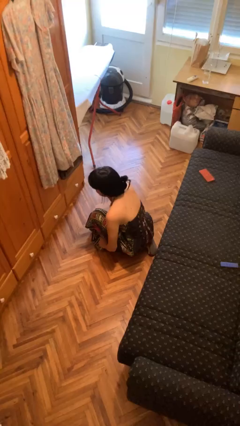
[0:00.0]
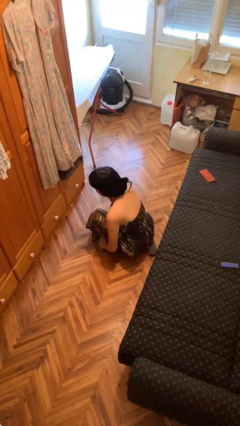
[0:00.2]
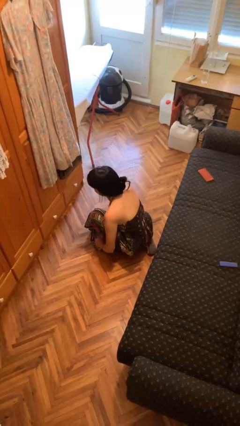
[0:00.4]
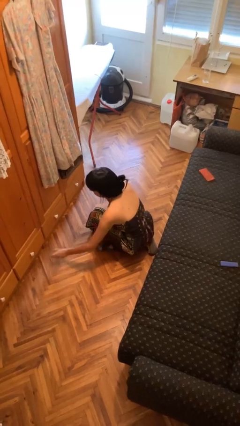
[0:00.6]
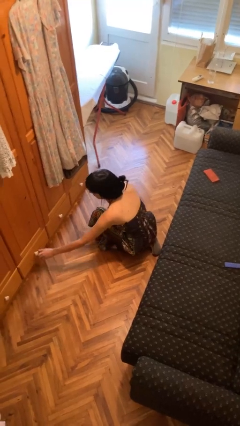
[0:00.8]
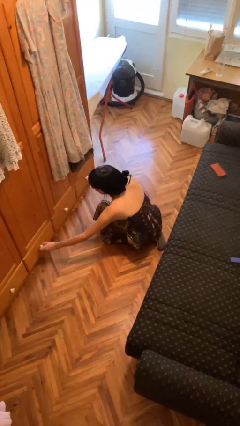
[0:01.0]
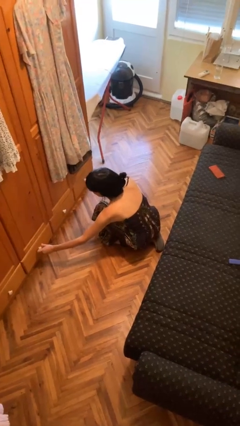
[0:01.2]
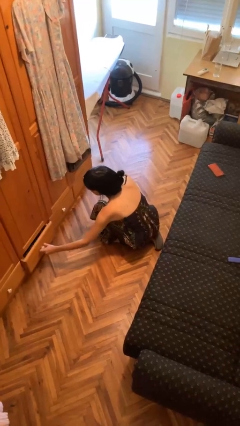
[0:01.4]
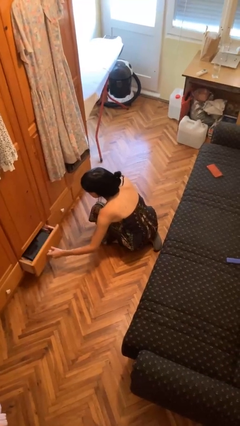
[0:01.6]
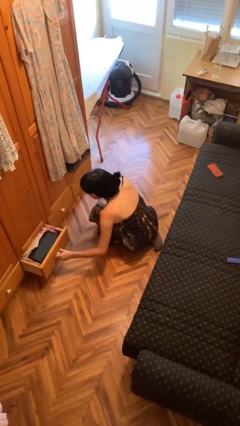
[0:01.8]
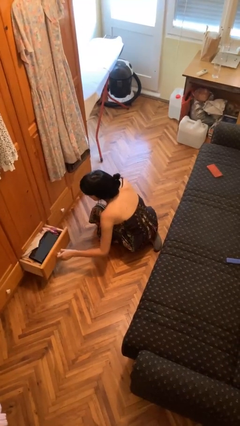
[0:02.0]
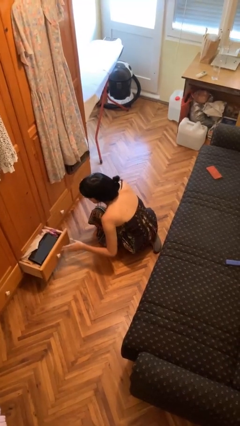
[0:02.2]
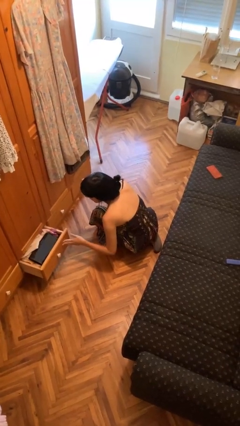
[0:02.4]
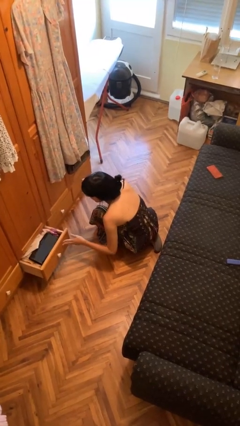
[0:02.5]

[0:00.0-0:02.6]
person opens dresser drawer

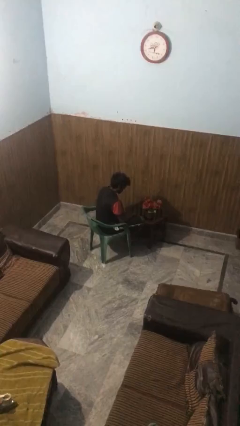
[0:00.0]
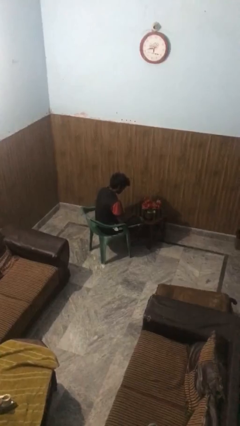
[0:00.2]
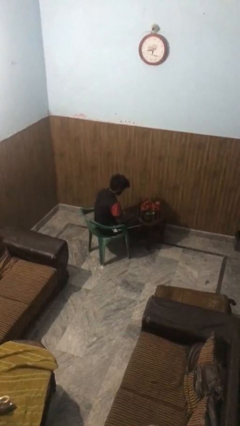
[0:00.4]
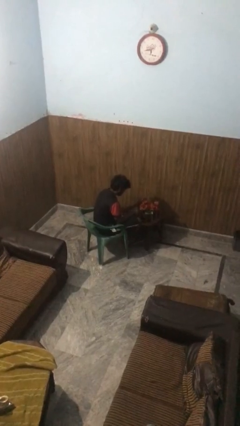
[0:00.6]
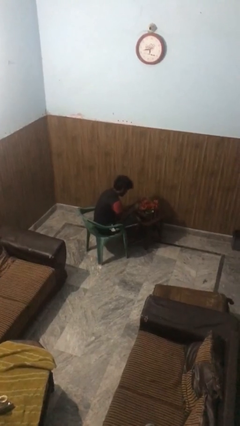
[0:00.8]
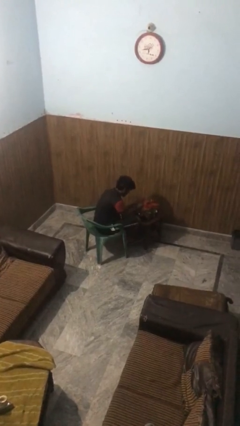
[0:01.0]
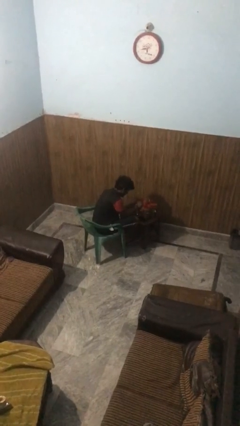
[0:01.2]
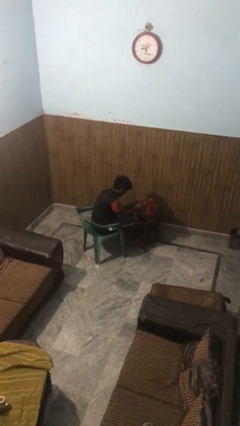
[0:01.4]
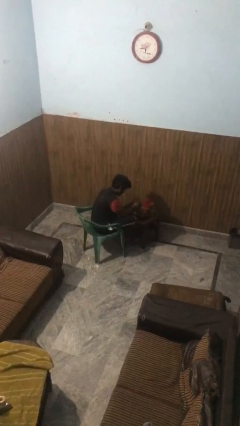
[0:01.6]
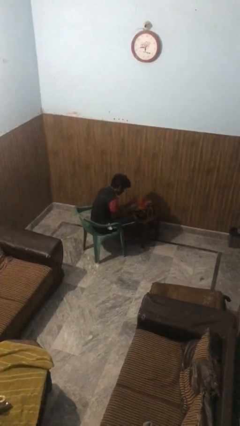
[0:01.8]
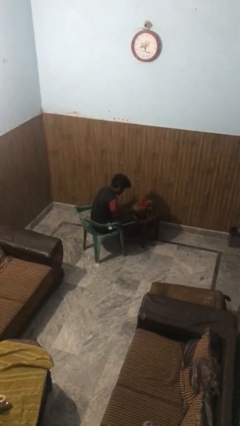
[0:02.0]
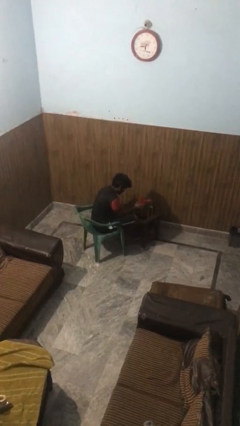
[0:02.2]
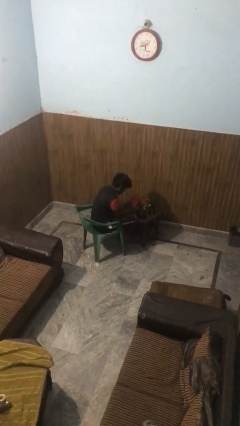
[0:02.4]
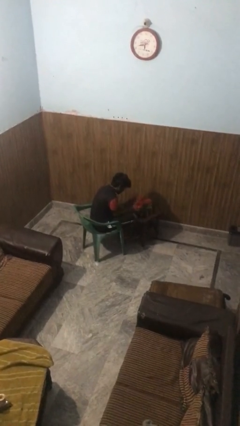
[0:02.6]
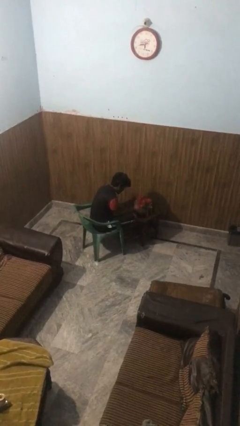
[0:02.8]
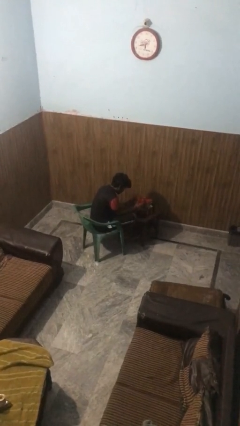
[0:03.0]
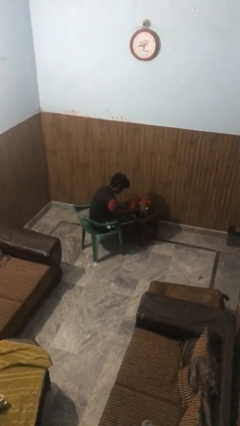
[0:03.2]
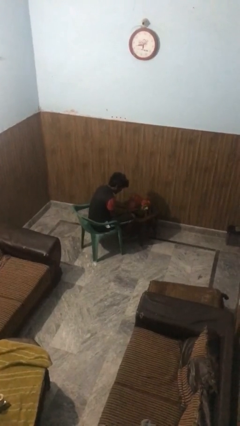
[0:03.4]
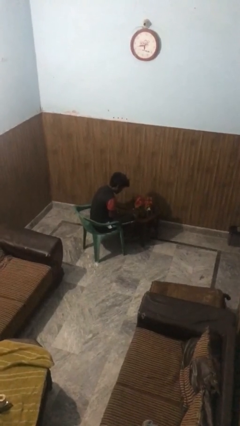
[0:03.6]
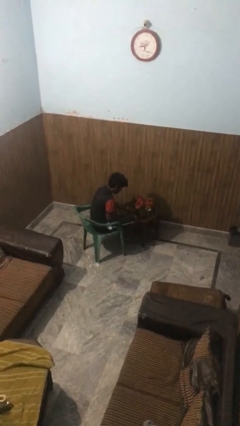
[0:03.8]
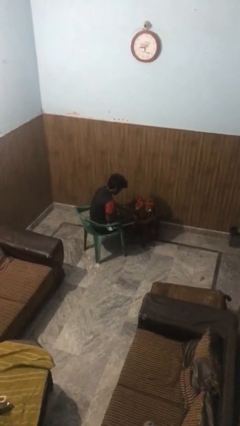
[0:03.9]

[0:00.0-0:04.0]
person arranges flowers in vase

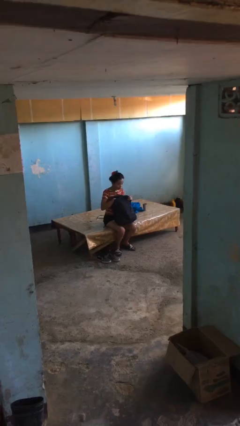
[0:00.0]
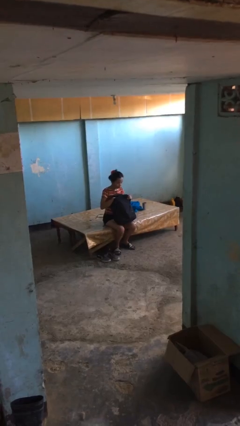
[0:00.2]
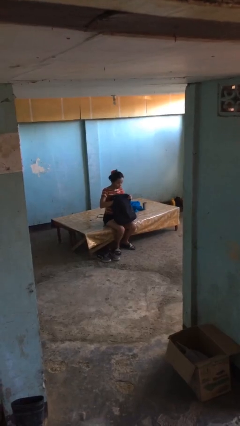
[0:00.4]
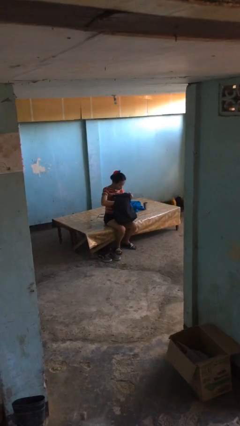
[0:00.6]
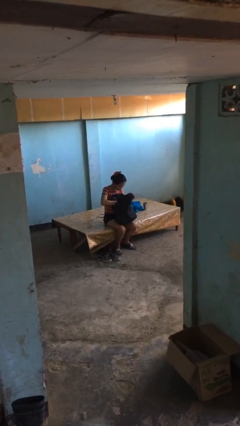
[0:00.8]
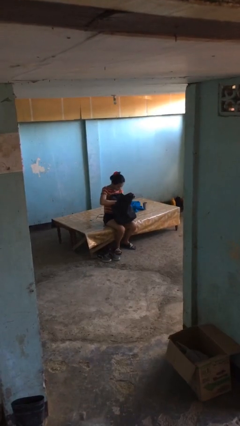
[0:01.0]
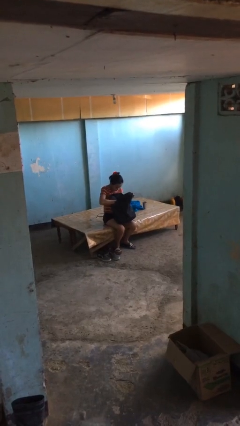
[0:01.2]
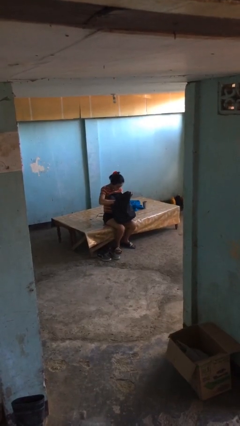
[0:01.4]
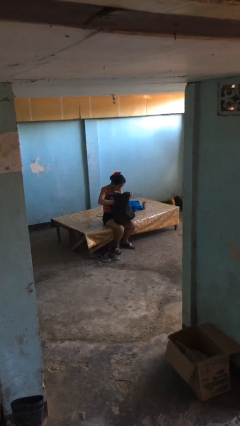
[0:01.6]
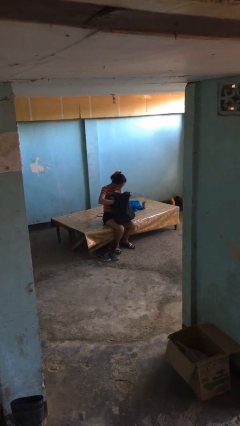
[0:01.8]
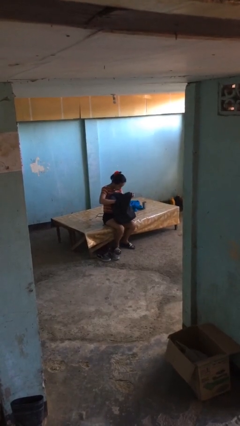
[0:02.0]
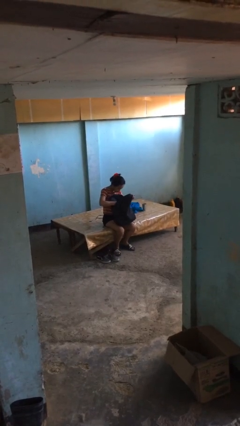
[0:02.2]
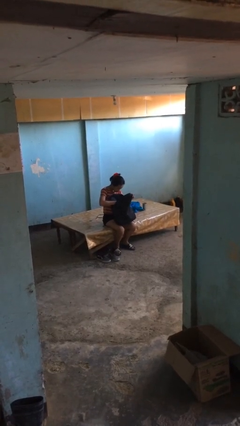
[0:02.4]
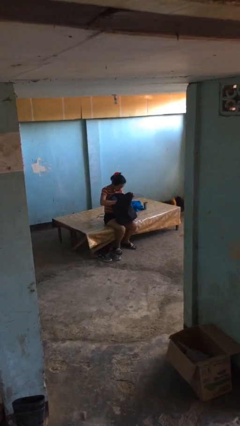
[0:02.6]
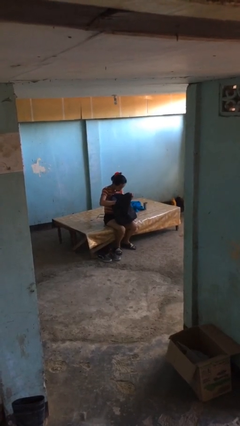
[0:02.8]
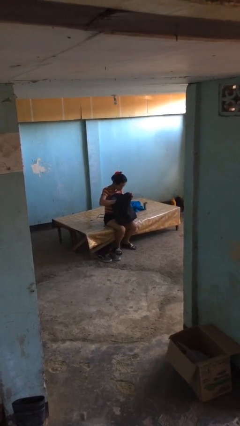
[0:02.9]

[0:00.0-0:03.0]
person searches in backpack

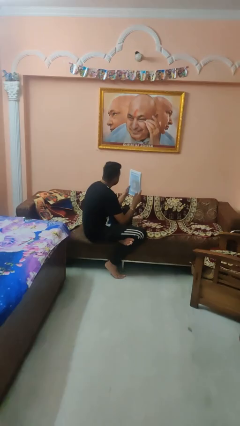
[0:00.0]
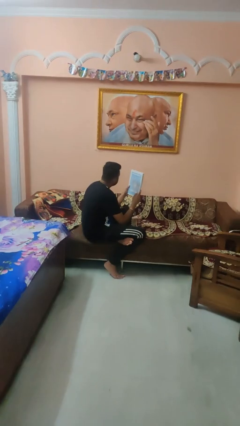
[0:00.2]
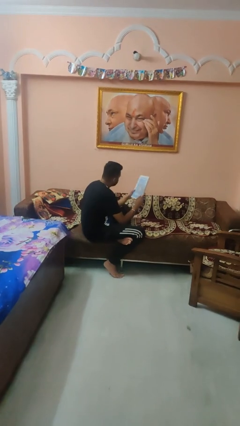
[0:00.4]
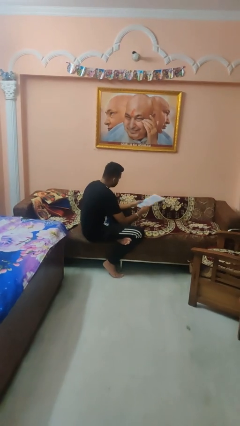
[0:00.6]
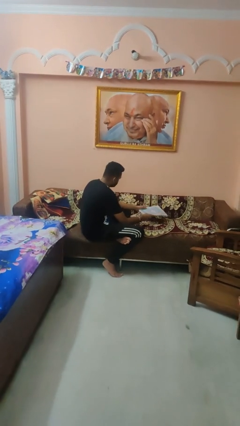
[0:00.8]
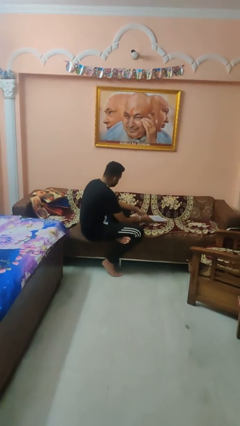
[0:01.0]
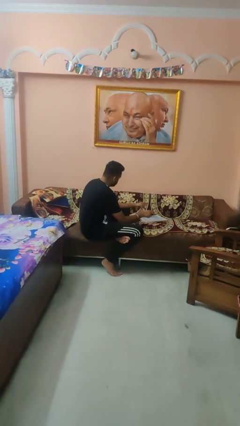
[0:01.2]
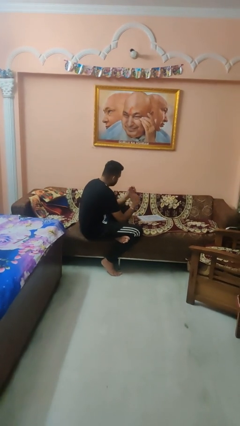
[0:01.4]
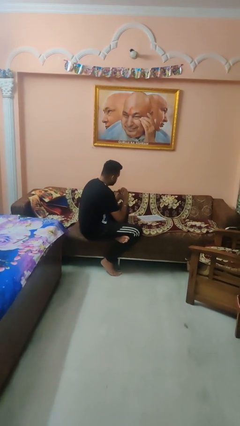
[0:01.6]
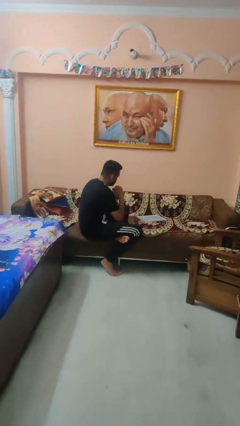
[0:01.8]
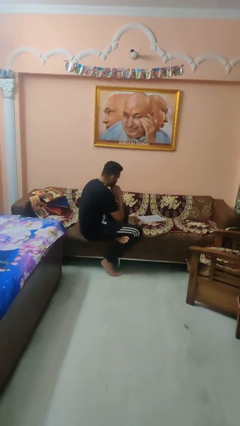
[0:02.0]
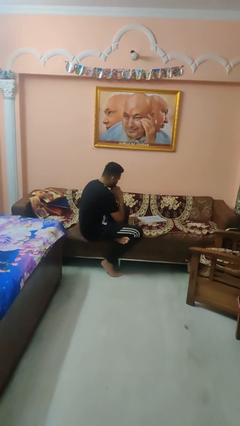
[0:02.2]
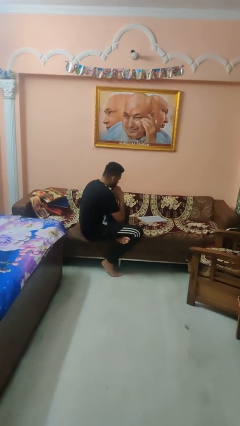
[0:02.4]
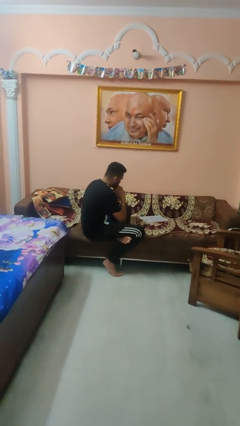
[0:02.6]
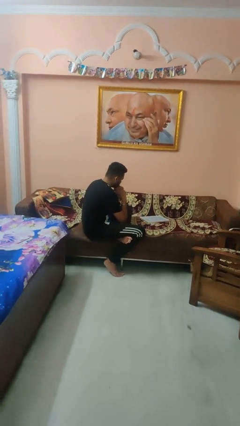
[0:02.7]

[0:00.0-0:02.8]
person puts down object on couch

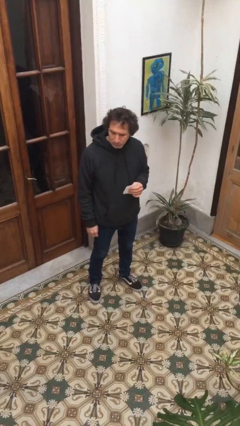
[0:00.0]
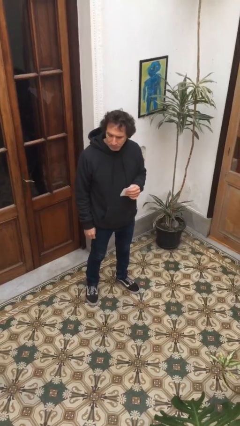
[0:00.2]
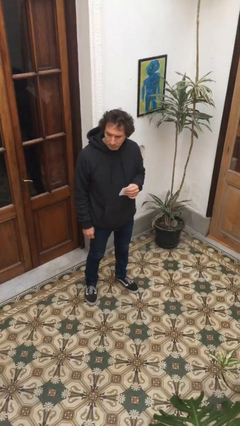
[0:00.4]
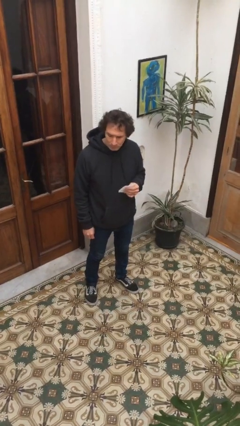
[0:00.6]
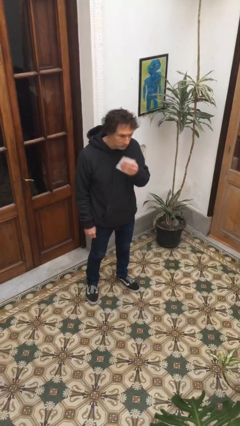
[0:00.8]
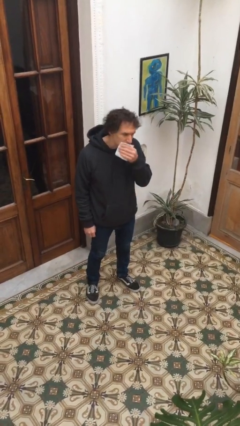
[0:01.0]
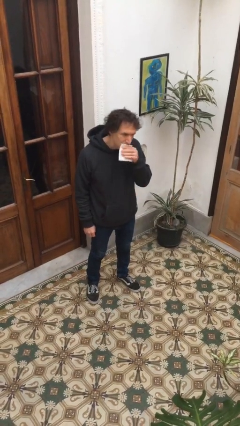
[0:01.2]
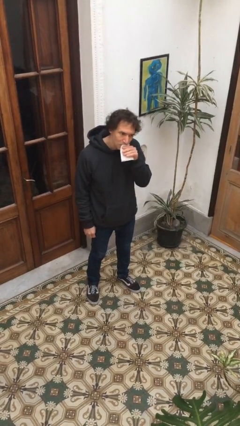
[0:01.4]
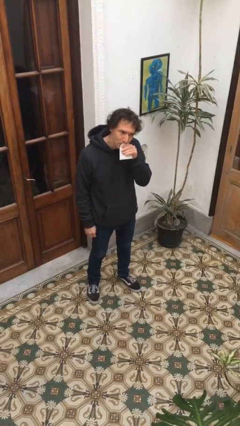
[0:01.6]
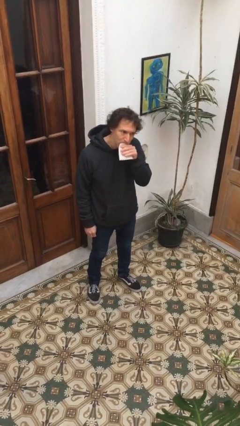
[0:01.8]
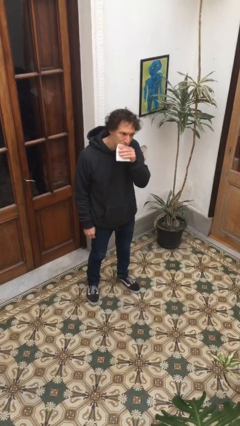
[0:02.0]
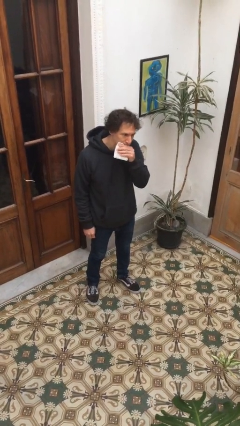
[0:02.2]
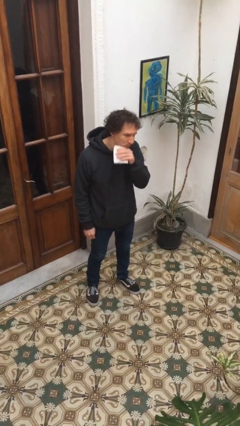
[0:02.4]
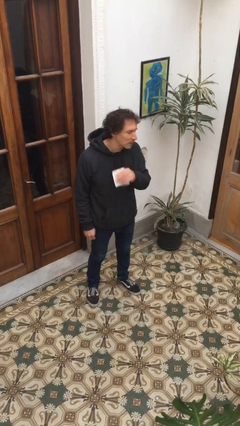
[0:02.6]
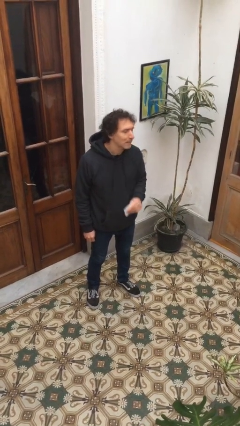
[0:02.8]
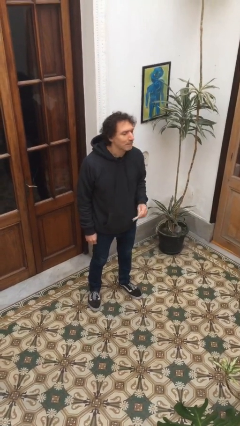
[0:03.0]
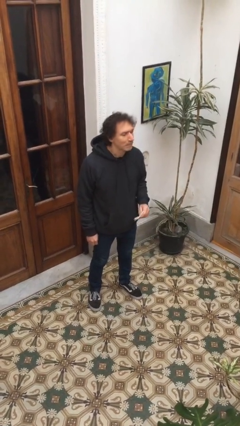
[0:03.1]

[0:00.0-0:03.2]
person wipes mouth with napkin

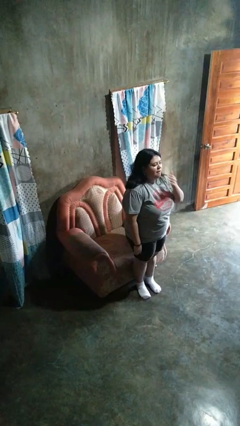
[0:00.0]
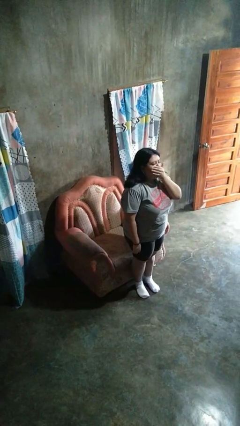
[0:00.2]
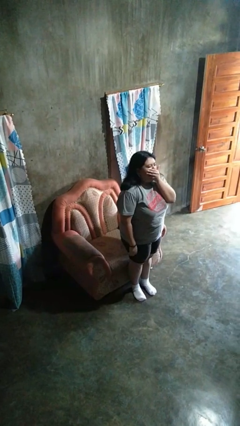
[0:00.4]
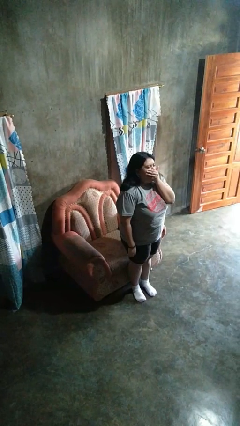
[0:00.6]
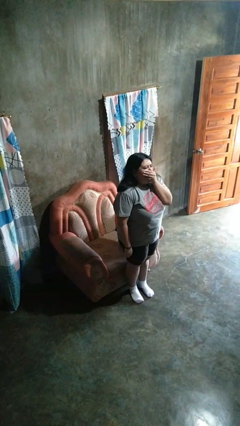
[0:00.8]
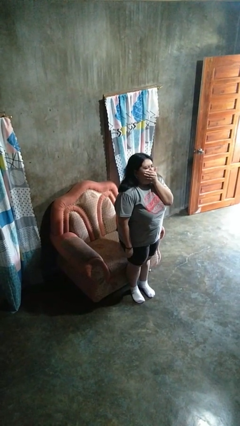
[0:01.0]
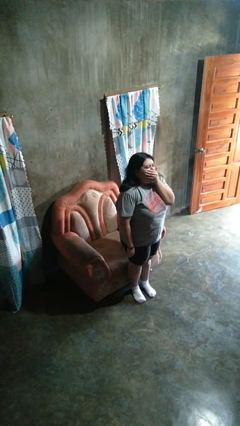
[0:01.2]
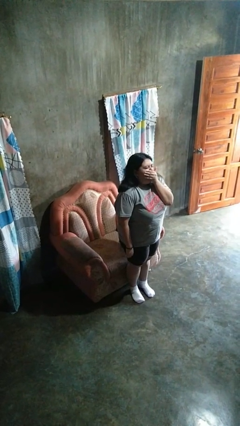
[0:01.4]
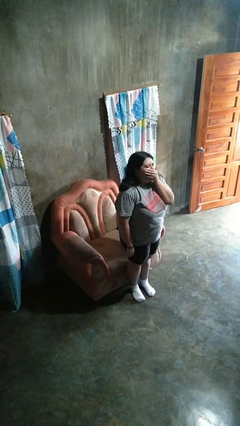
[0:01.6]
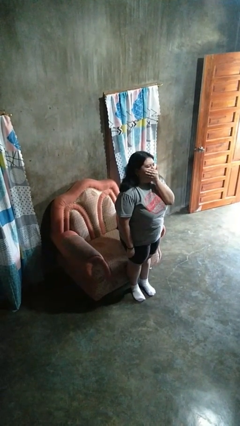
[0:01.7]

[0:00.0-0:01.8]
person yawns
